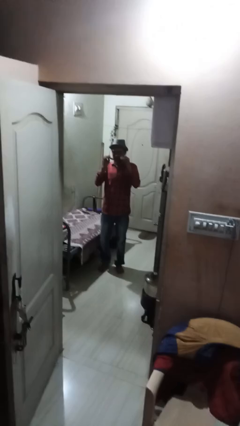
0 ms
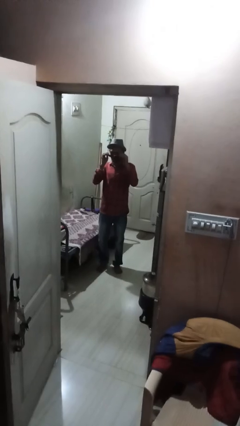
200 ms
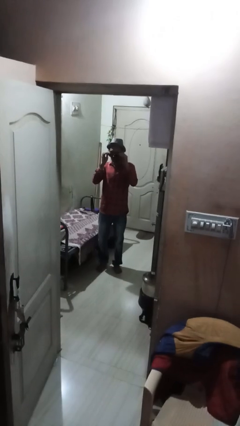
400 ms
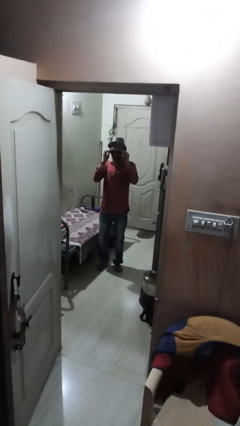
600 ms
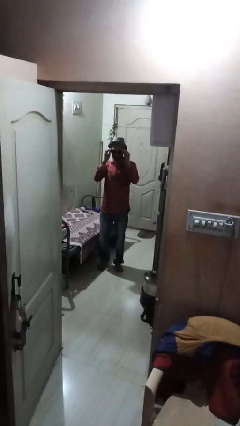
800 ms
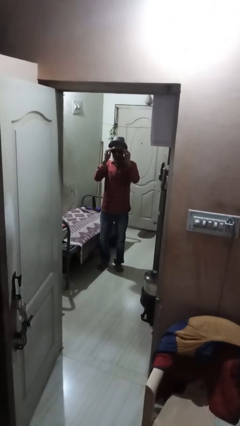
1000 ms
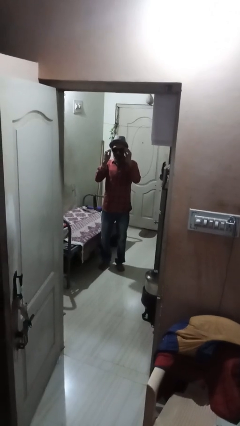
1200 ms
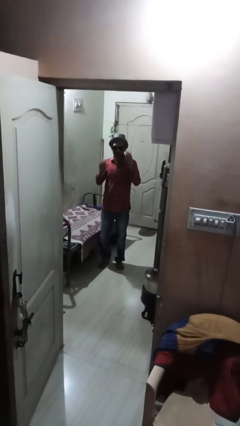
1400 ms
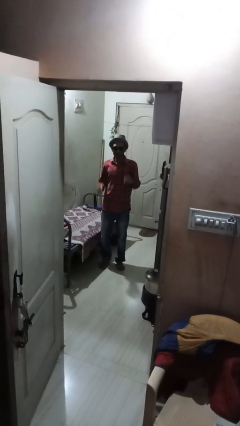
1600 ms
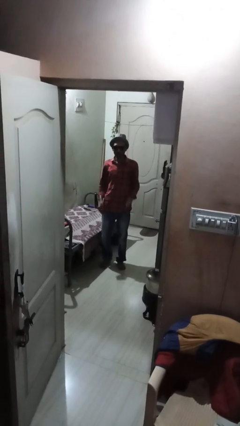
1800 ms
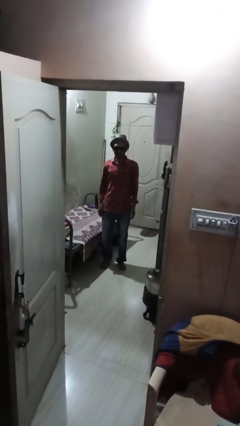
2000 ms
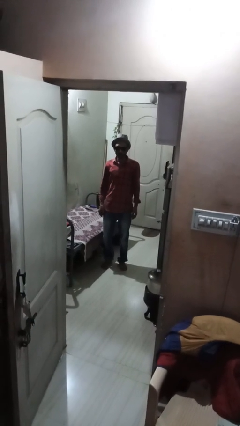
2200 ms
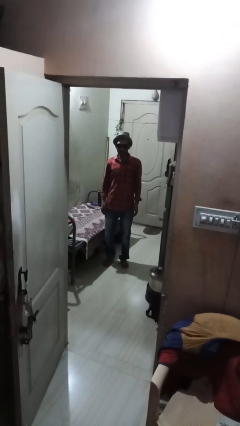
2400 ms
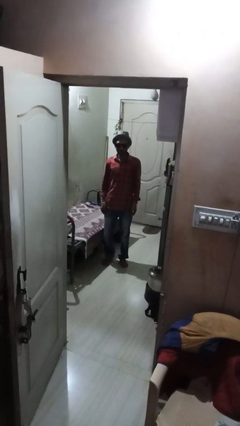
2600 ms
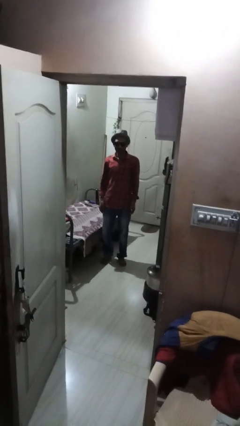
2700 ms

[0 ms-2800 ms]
person puts on sunglasses

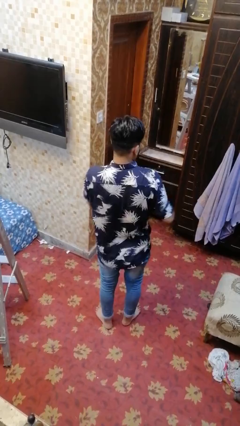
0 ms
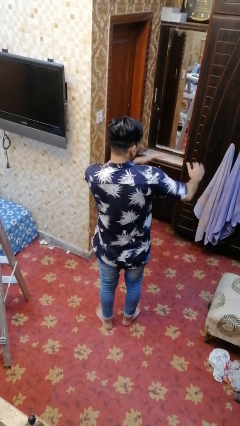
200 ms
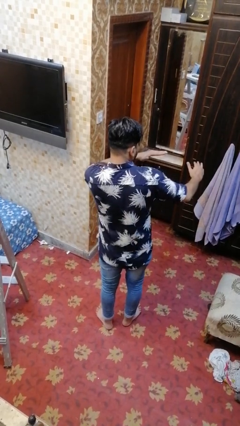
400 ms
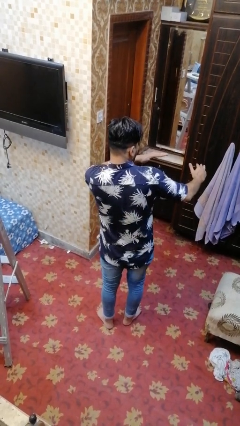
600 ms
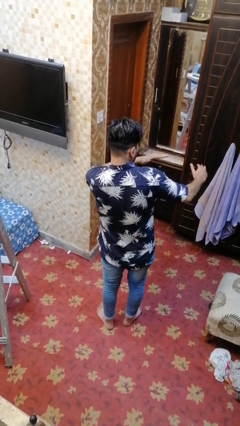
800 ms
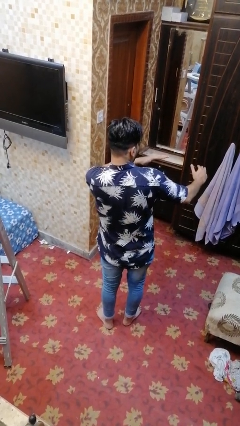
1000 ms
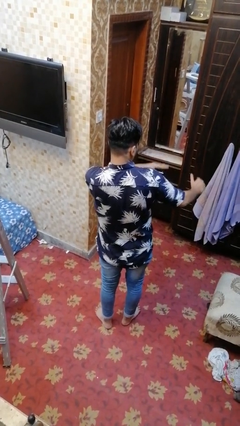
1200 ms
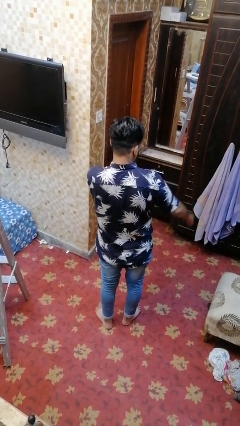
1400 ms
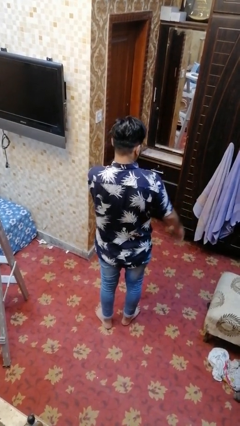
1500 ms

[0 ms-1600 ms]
person karate chop

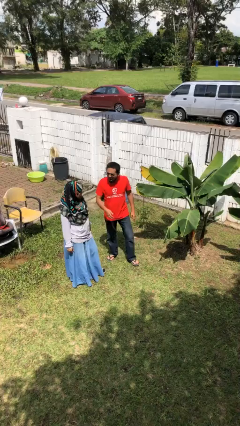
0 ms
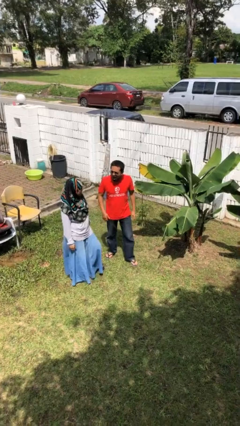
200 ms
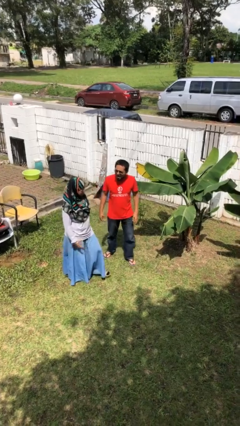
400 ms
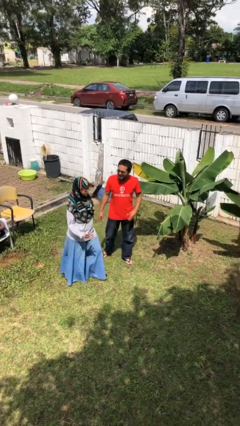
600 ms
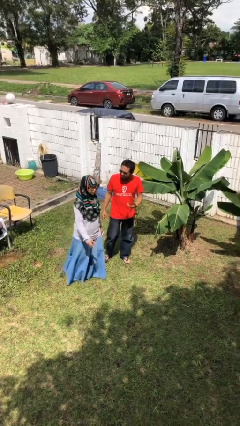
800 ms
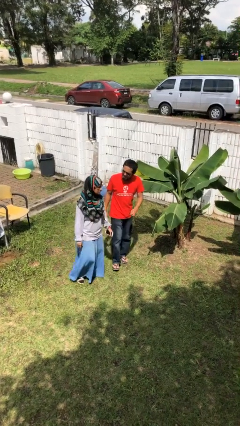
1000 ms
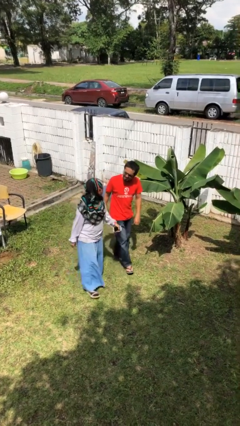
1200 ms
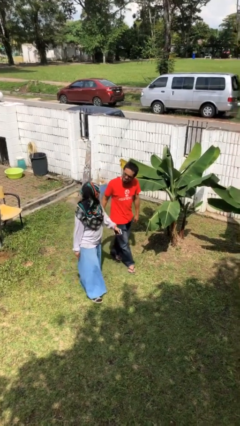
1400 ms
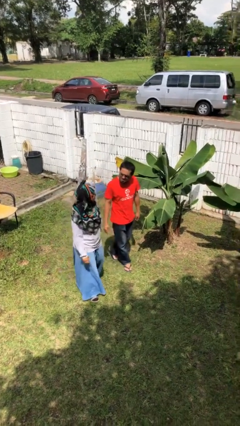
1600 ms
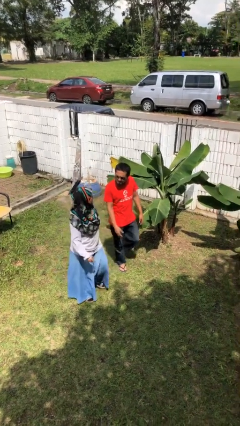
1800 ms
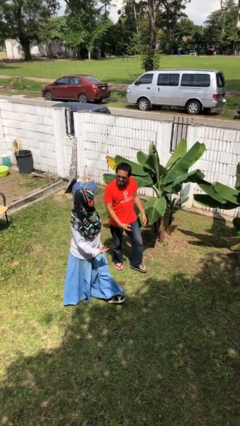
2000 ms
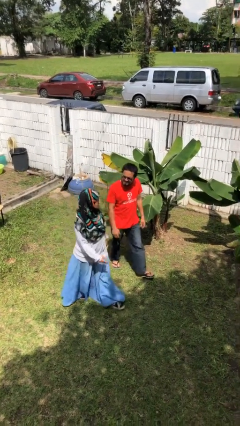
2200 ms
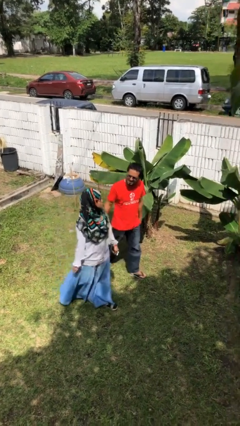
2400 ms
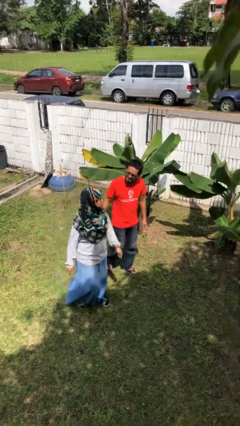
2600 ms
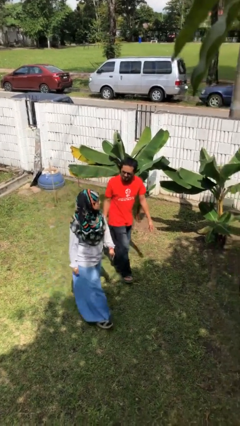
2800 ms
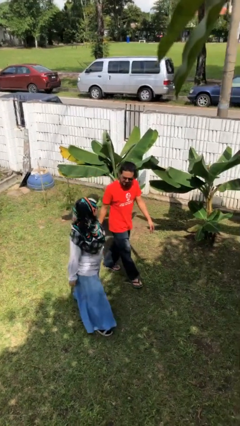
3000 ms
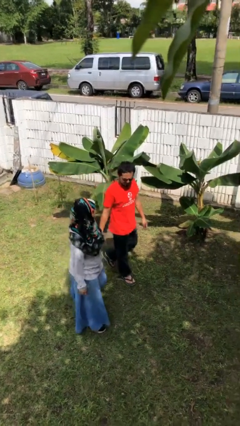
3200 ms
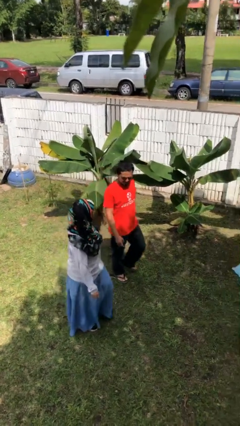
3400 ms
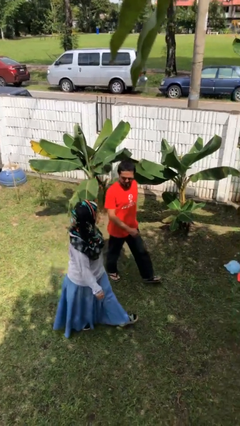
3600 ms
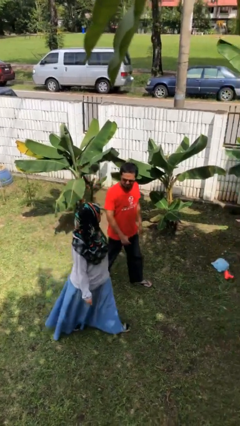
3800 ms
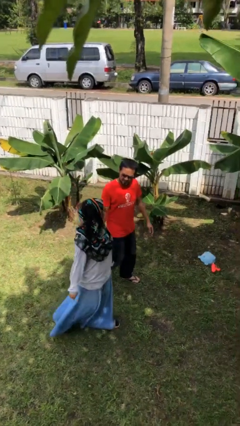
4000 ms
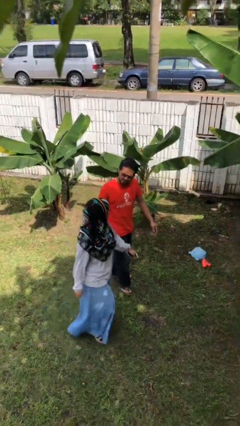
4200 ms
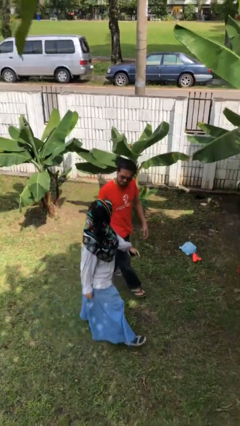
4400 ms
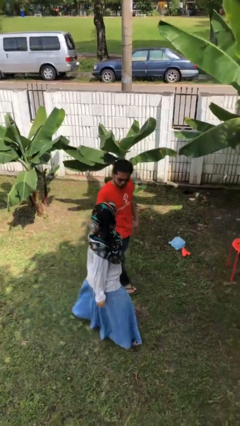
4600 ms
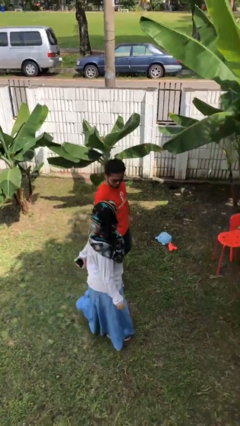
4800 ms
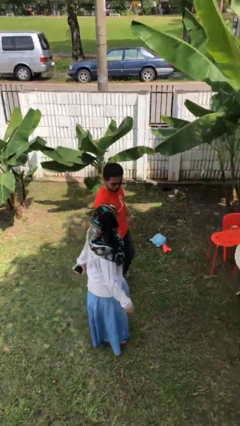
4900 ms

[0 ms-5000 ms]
person talks to person

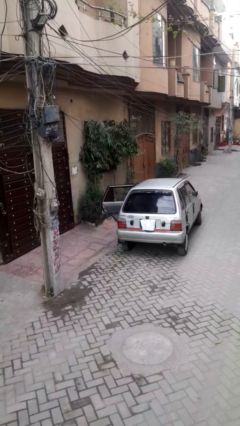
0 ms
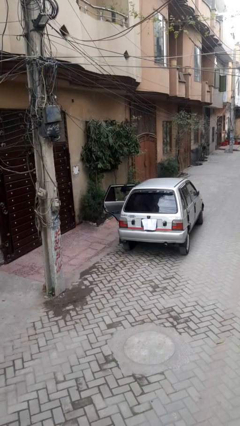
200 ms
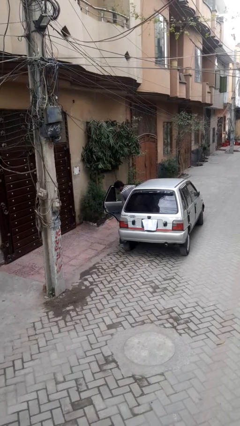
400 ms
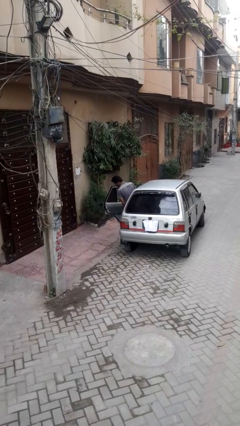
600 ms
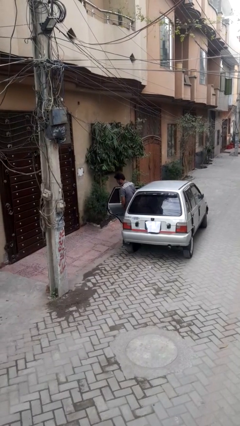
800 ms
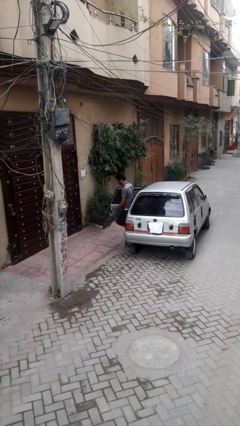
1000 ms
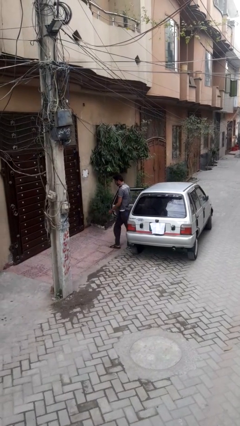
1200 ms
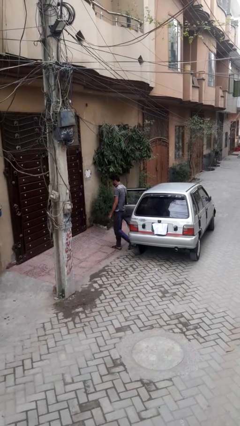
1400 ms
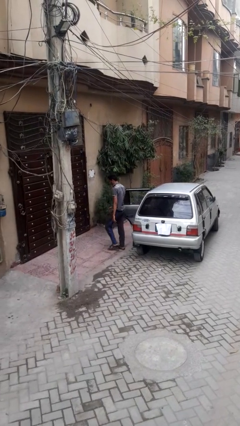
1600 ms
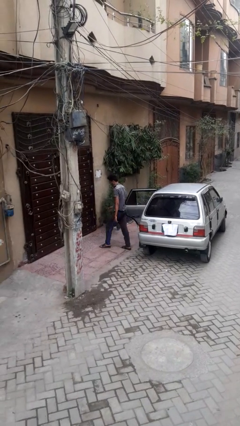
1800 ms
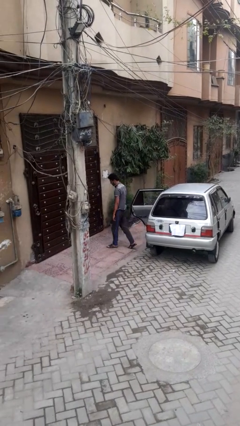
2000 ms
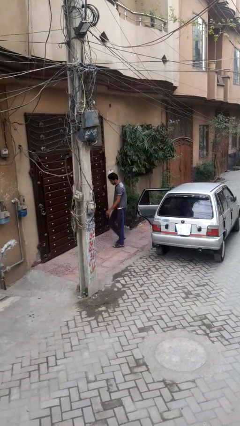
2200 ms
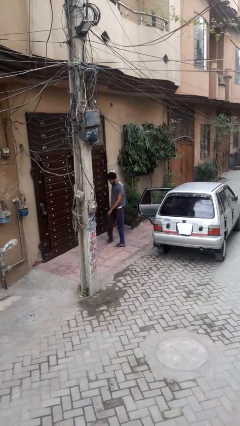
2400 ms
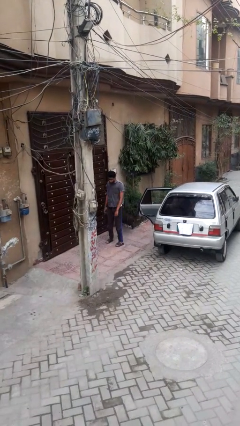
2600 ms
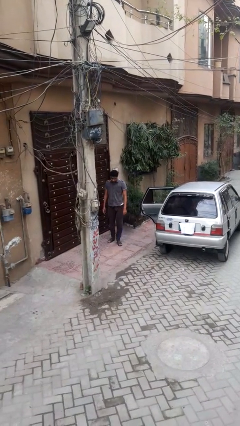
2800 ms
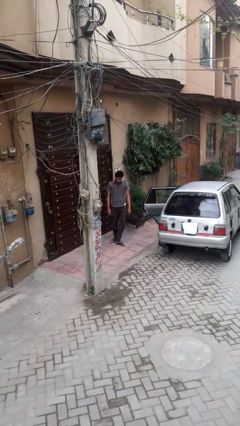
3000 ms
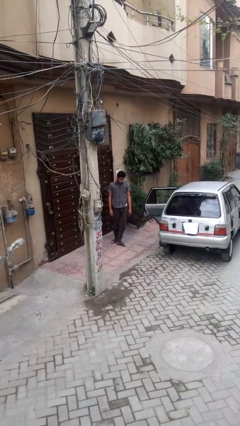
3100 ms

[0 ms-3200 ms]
person exits car

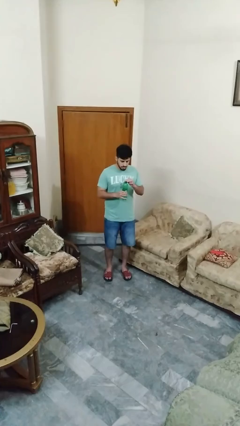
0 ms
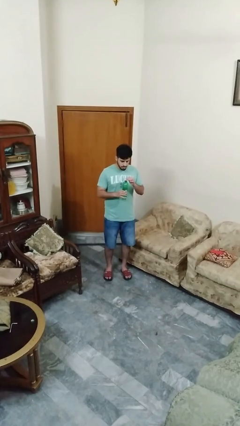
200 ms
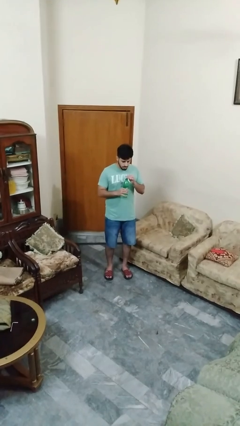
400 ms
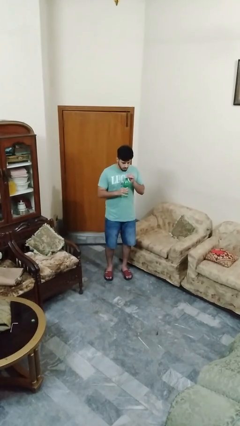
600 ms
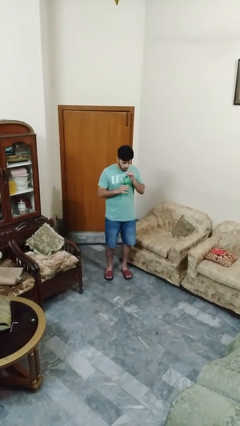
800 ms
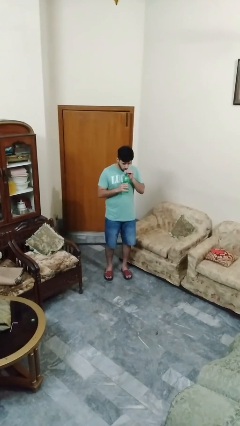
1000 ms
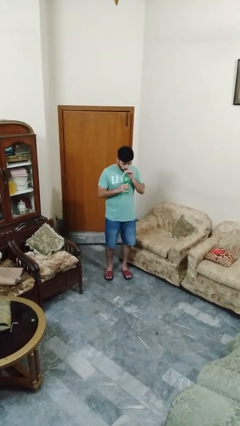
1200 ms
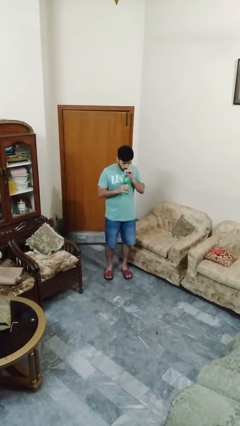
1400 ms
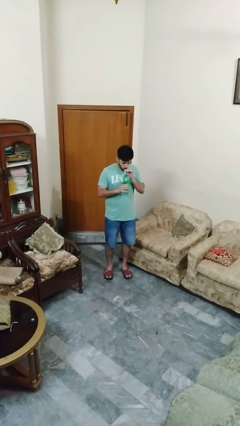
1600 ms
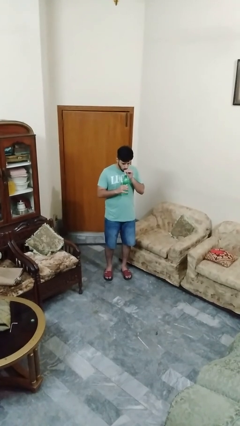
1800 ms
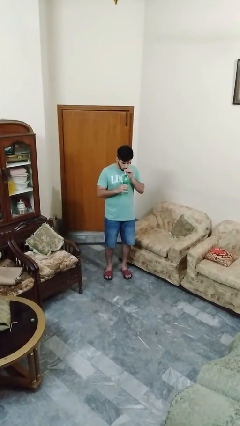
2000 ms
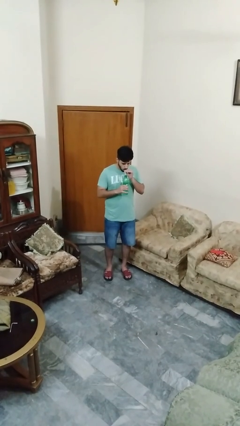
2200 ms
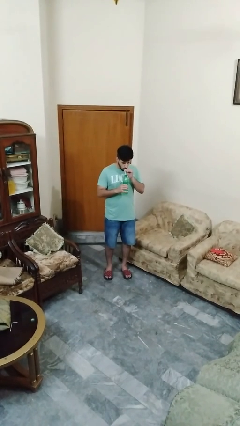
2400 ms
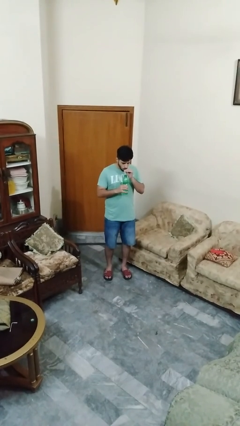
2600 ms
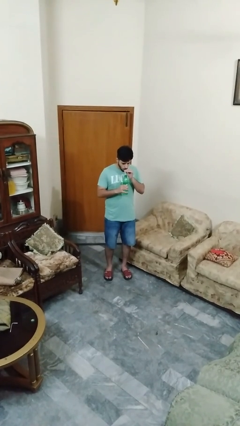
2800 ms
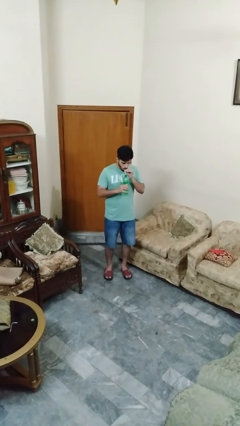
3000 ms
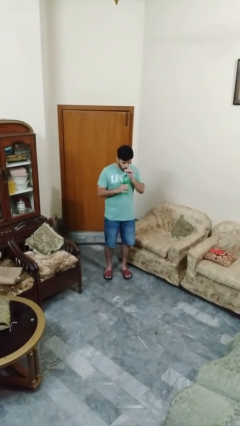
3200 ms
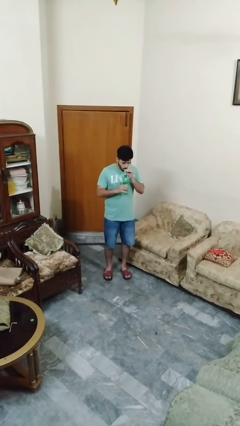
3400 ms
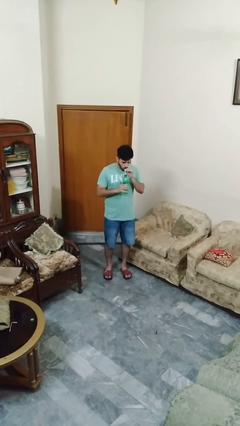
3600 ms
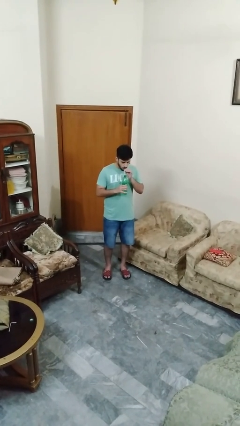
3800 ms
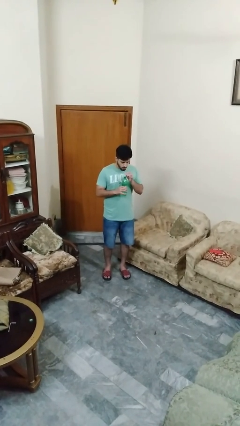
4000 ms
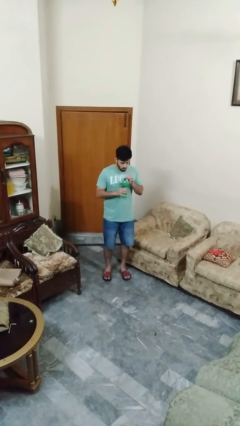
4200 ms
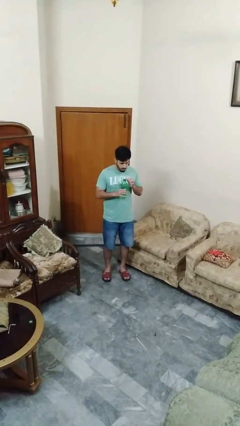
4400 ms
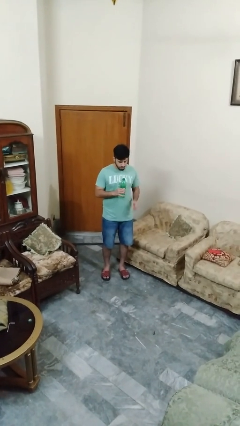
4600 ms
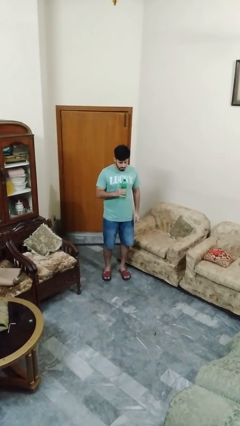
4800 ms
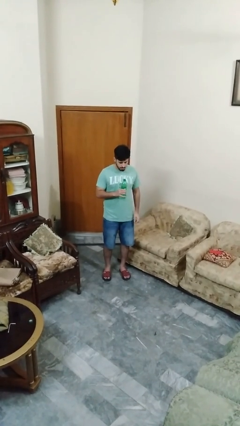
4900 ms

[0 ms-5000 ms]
person drinks from straw

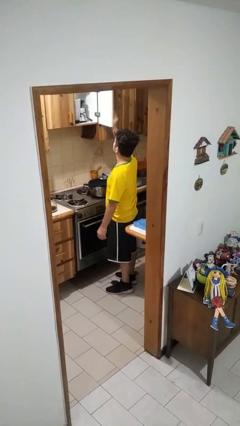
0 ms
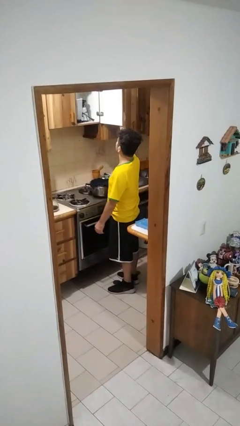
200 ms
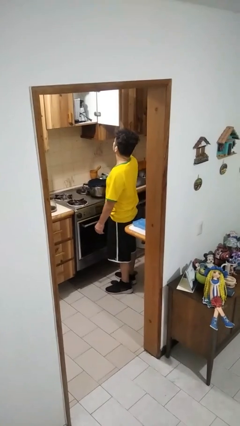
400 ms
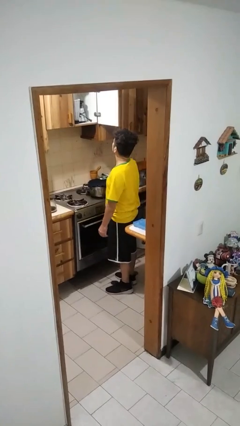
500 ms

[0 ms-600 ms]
person opens cabinet
